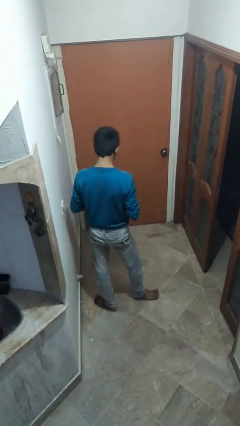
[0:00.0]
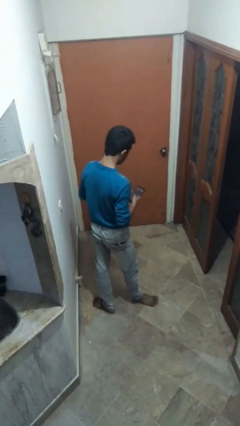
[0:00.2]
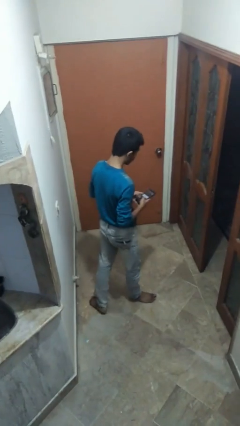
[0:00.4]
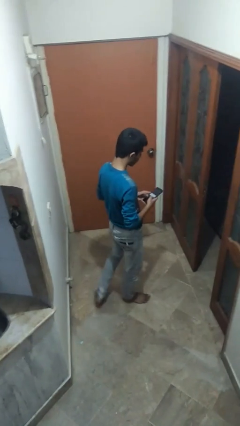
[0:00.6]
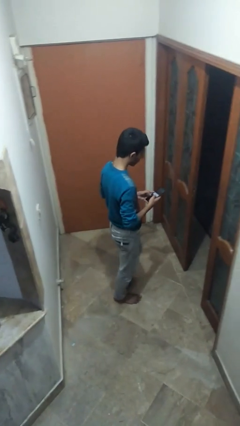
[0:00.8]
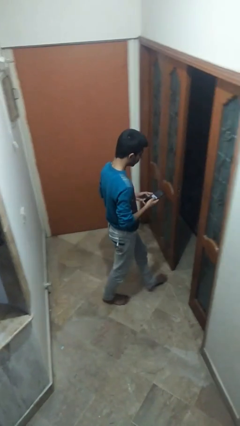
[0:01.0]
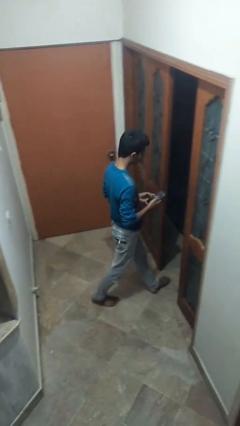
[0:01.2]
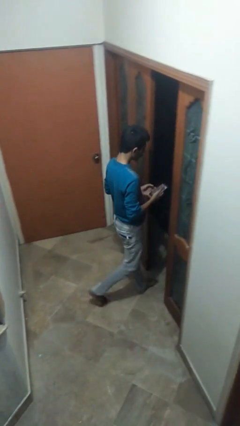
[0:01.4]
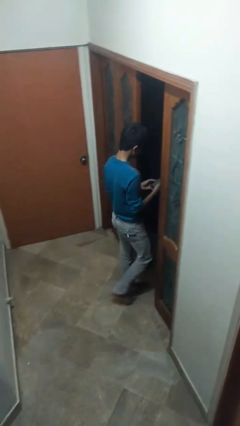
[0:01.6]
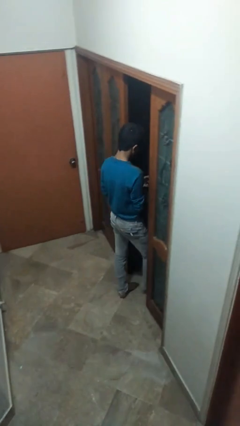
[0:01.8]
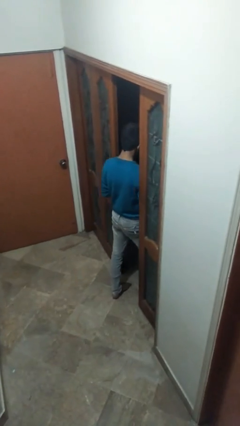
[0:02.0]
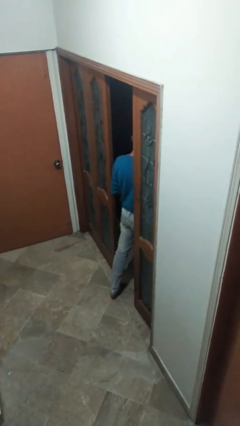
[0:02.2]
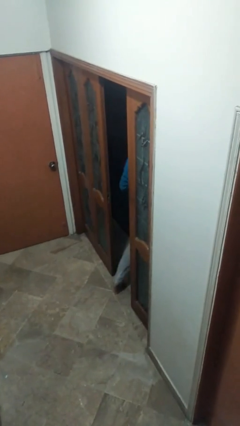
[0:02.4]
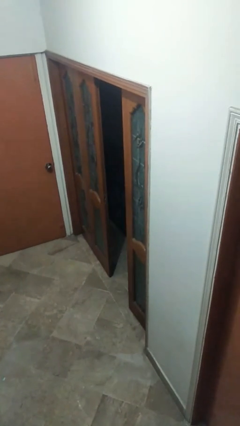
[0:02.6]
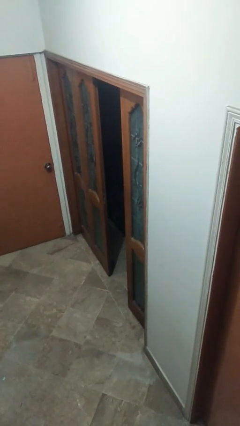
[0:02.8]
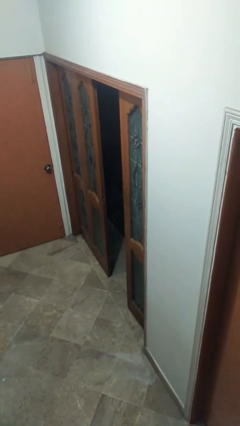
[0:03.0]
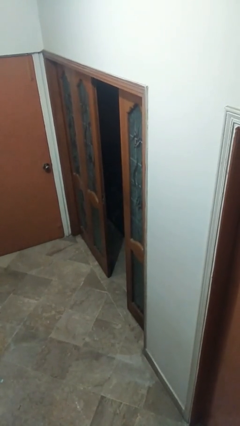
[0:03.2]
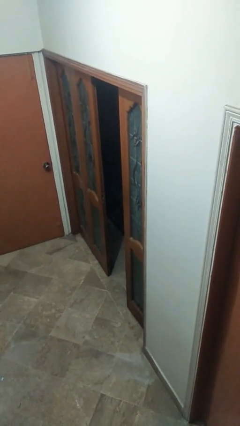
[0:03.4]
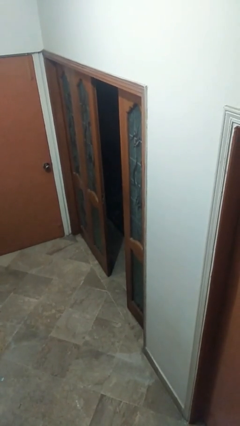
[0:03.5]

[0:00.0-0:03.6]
person exits scene through structure

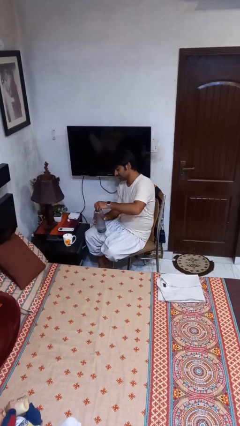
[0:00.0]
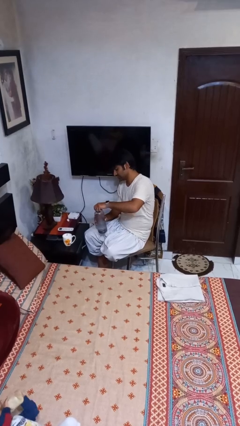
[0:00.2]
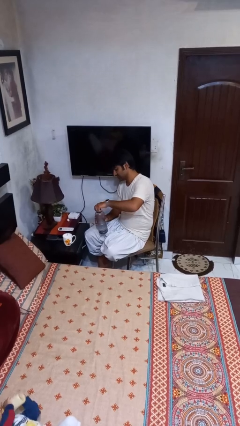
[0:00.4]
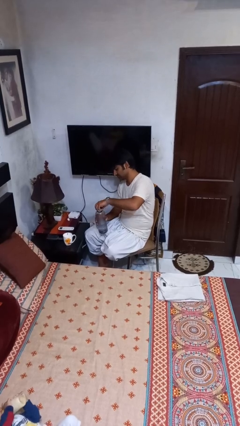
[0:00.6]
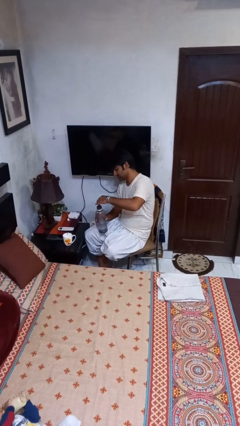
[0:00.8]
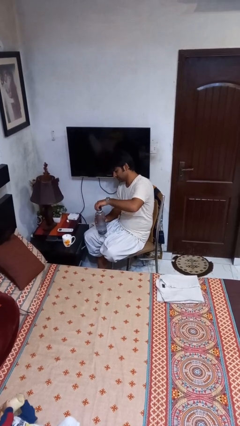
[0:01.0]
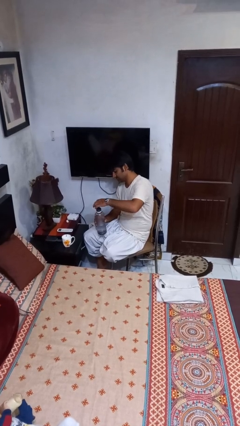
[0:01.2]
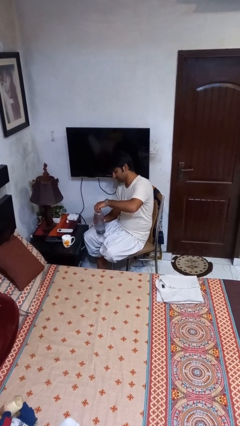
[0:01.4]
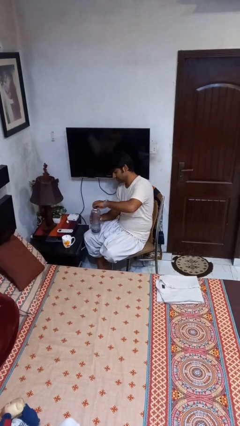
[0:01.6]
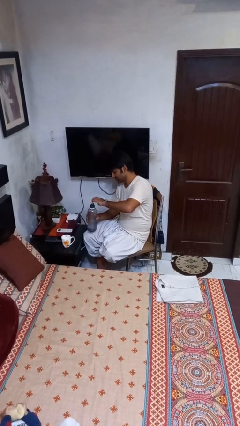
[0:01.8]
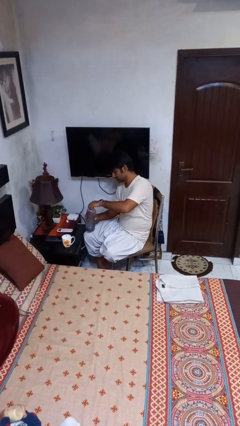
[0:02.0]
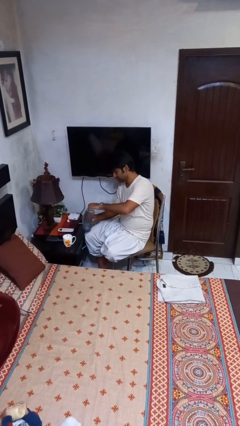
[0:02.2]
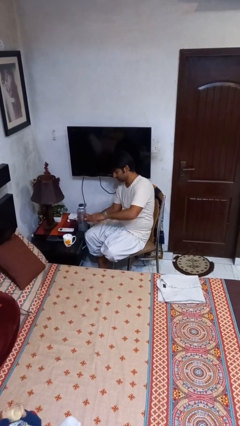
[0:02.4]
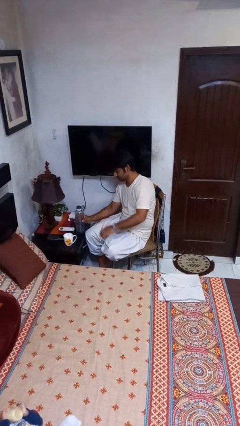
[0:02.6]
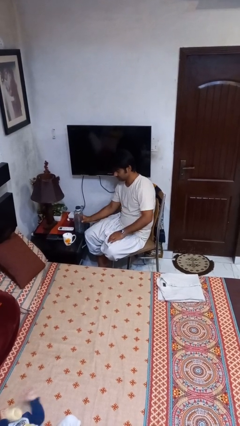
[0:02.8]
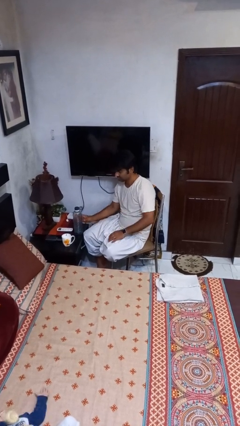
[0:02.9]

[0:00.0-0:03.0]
person screws lid to bottle

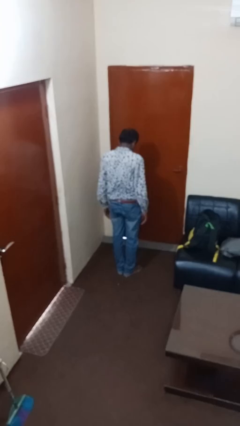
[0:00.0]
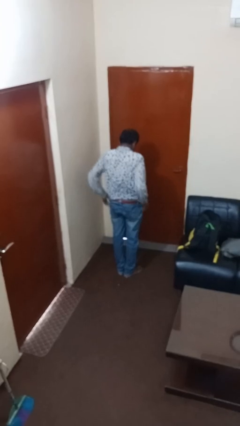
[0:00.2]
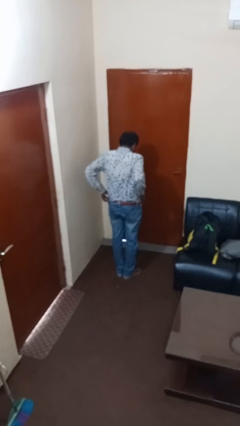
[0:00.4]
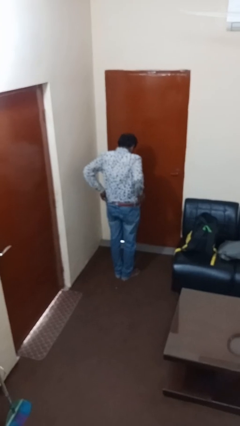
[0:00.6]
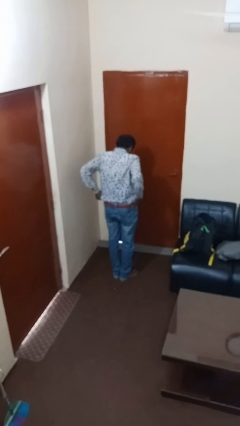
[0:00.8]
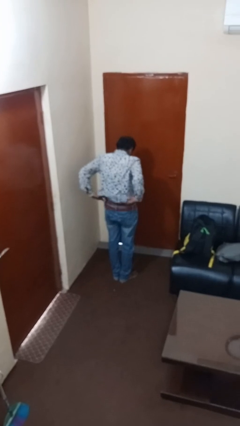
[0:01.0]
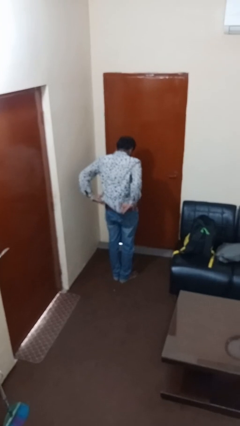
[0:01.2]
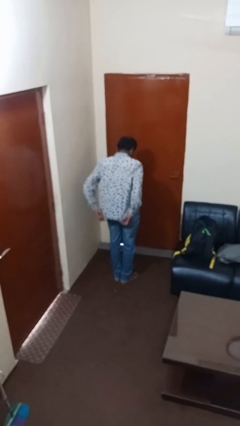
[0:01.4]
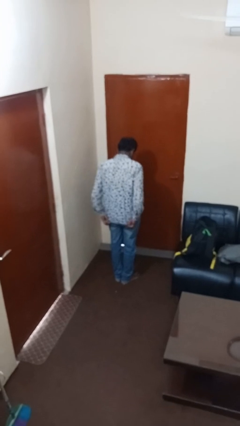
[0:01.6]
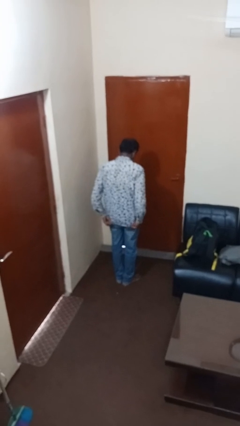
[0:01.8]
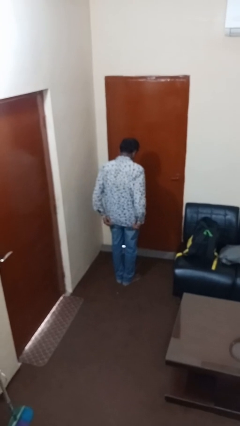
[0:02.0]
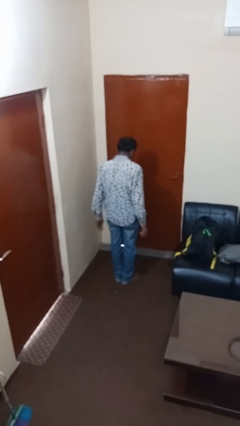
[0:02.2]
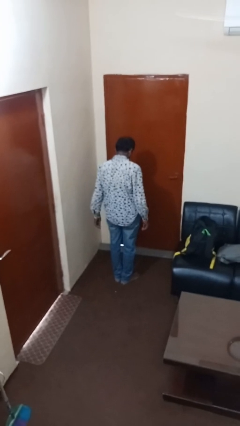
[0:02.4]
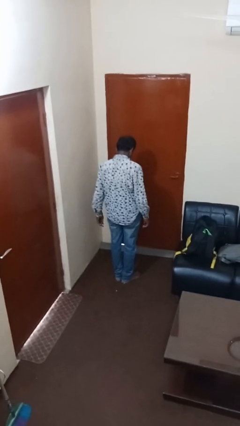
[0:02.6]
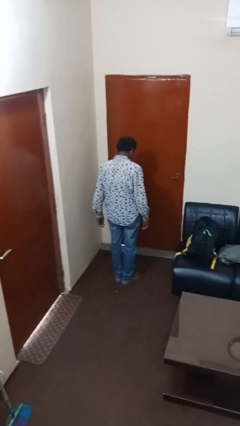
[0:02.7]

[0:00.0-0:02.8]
person untucks shirt

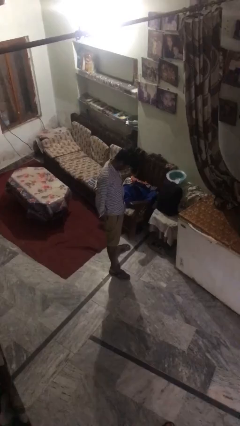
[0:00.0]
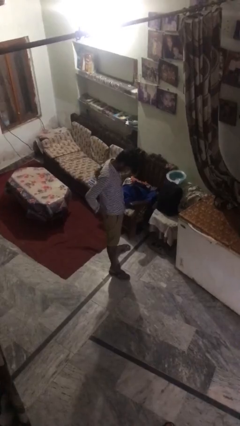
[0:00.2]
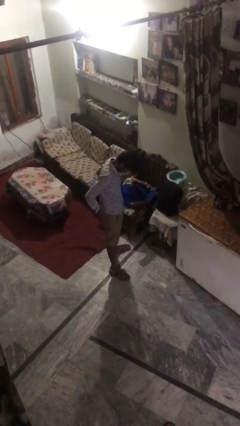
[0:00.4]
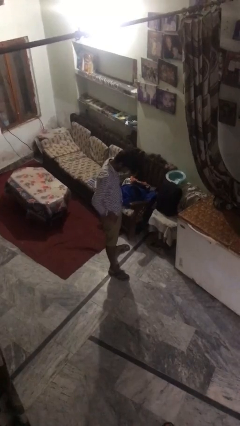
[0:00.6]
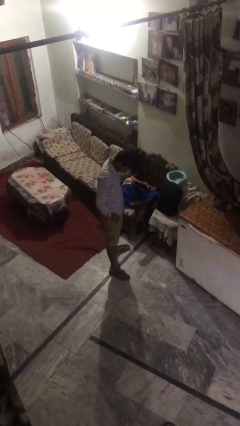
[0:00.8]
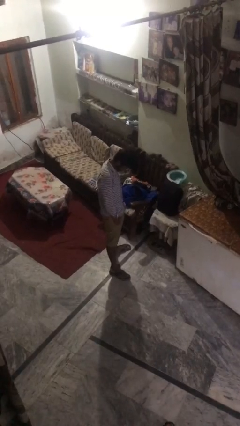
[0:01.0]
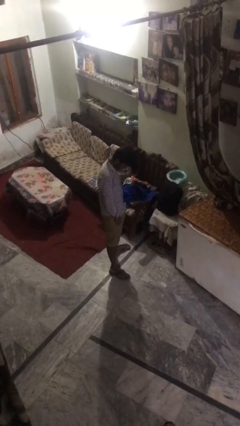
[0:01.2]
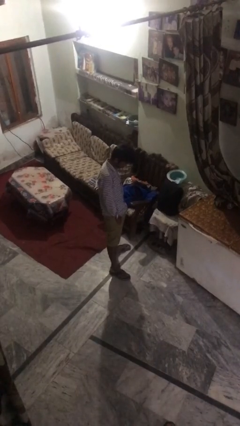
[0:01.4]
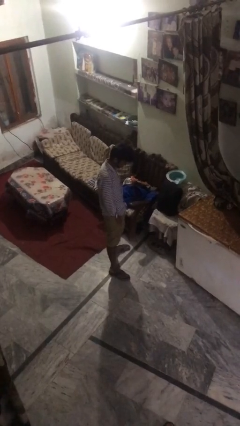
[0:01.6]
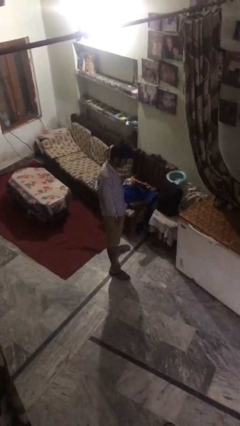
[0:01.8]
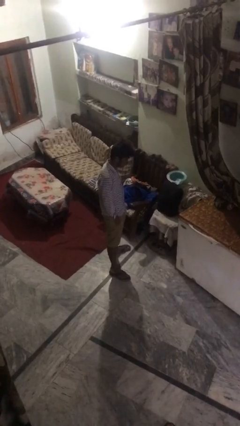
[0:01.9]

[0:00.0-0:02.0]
person puts hands in back pockets

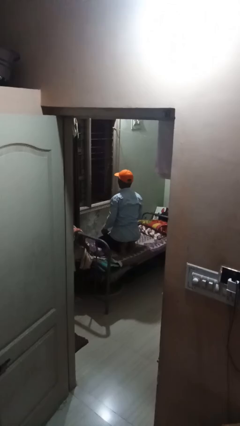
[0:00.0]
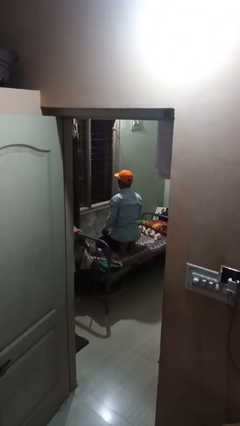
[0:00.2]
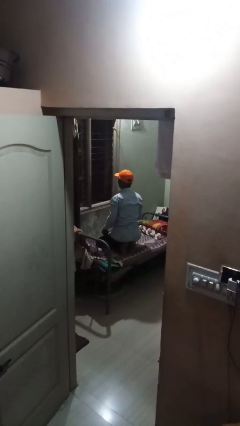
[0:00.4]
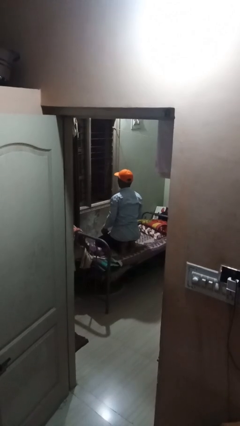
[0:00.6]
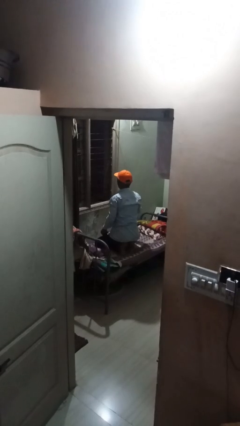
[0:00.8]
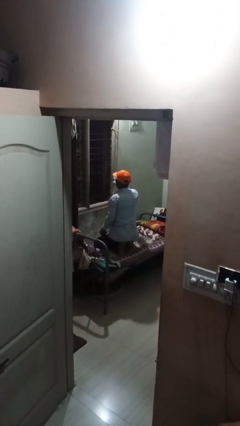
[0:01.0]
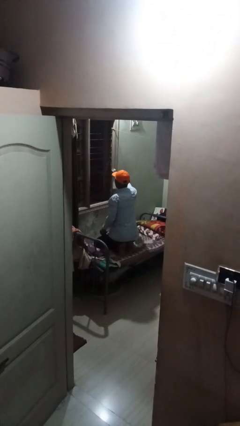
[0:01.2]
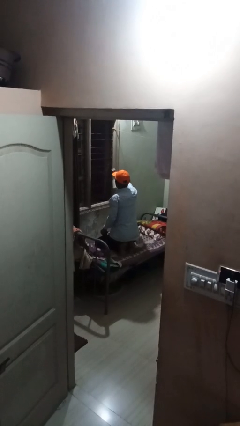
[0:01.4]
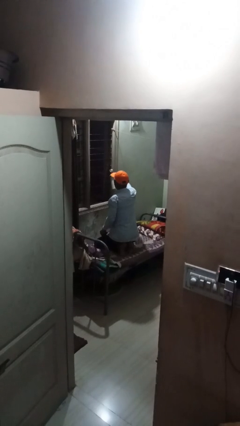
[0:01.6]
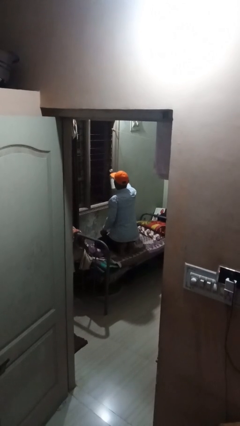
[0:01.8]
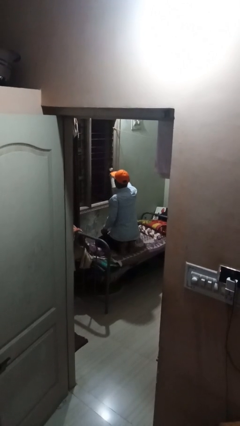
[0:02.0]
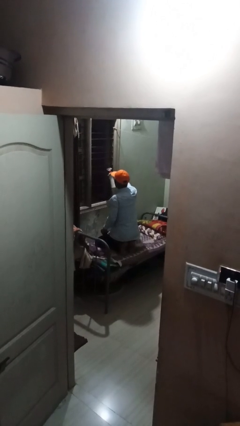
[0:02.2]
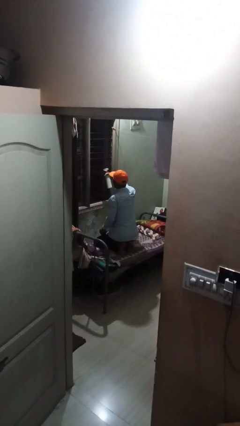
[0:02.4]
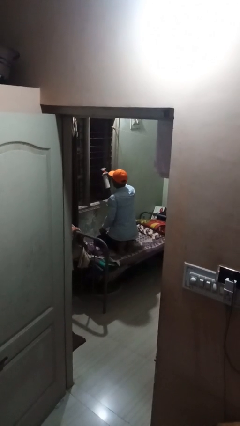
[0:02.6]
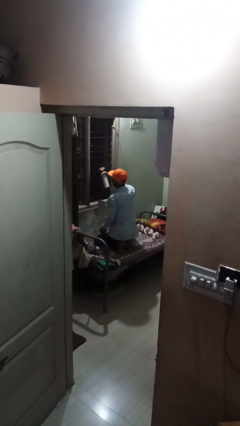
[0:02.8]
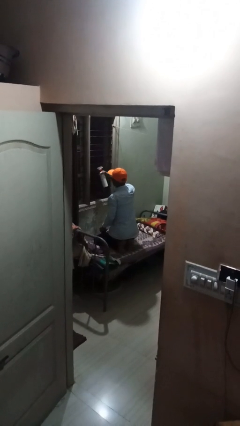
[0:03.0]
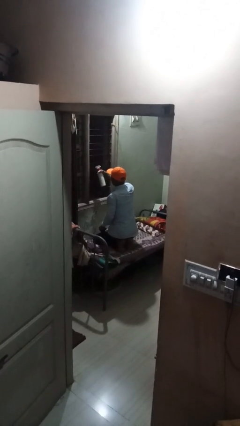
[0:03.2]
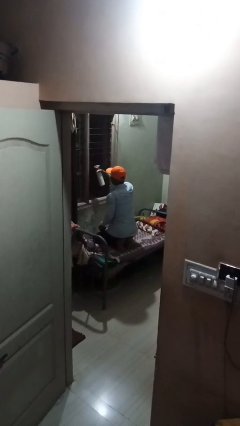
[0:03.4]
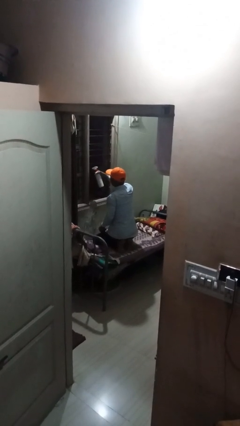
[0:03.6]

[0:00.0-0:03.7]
person sprays from bottle

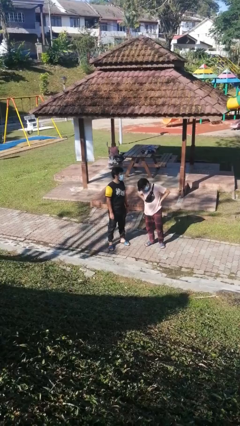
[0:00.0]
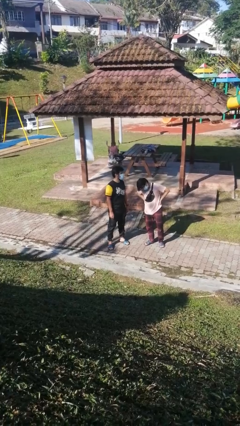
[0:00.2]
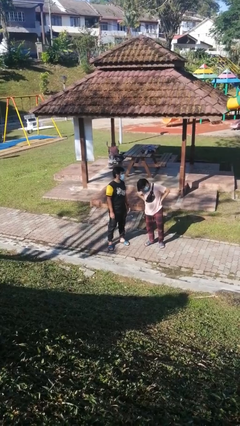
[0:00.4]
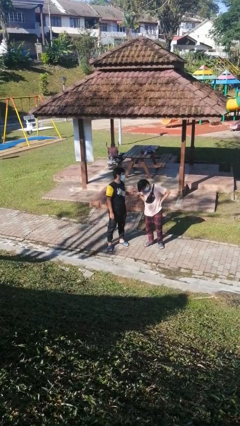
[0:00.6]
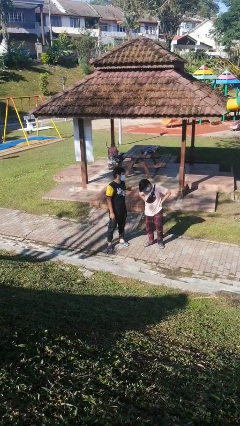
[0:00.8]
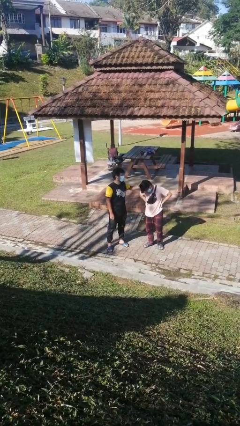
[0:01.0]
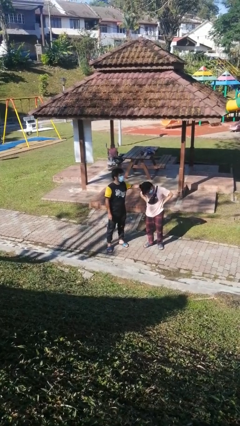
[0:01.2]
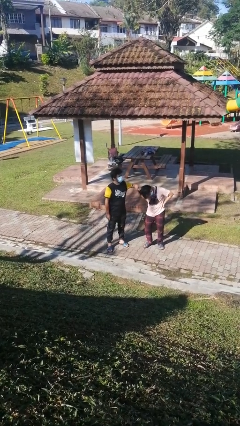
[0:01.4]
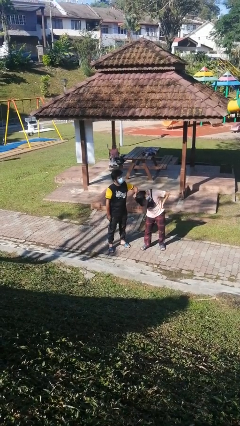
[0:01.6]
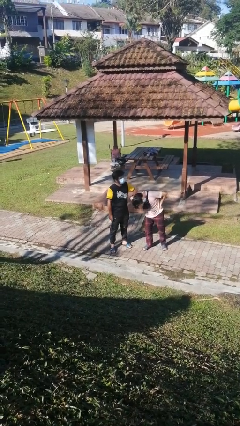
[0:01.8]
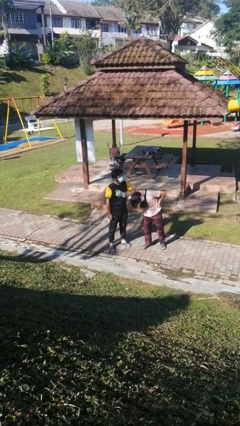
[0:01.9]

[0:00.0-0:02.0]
person grabs person by hair

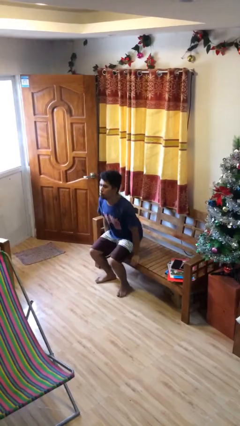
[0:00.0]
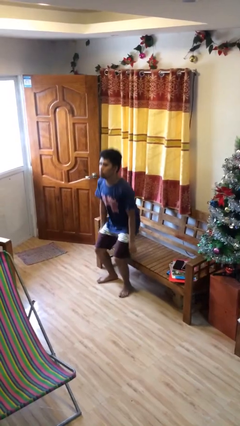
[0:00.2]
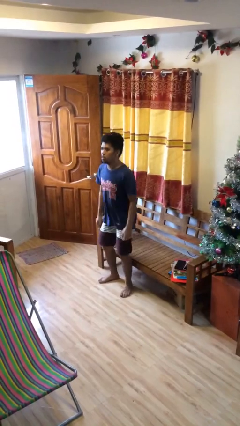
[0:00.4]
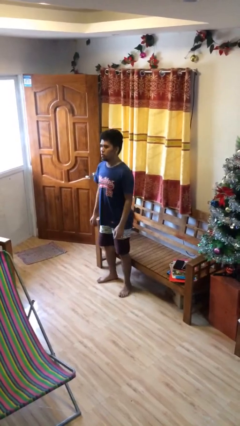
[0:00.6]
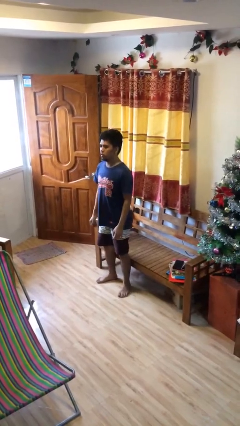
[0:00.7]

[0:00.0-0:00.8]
person stands up
